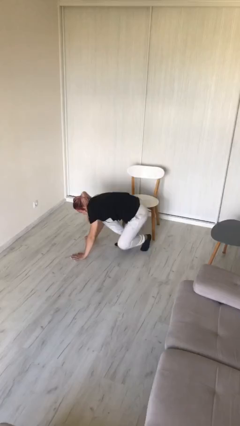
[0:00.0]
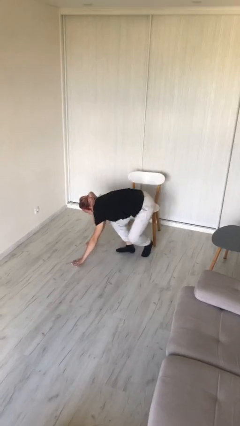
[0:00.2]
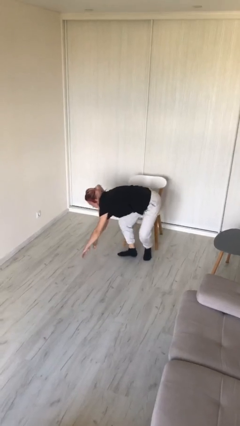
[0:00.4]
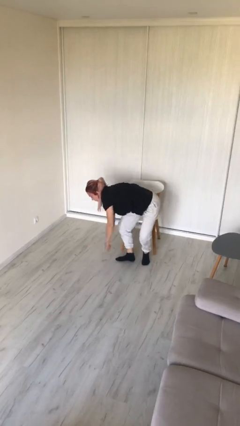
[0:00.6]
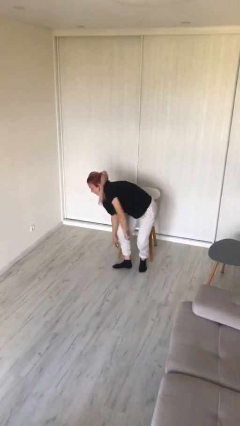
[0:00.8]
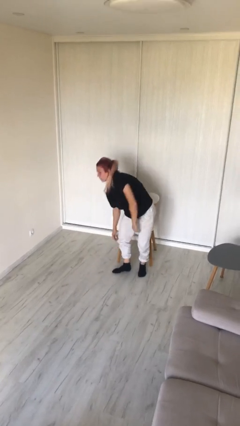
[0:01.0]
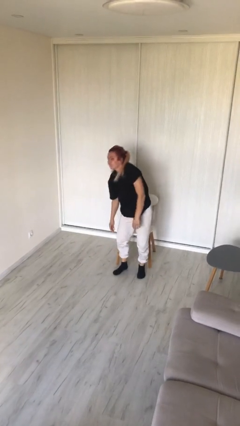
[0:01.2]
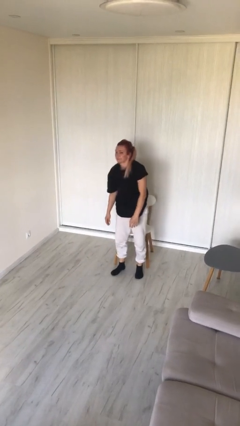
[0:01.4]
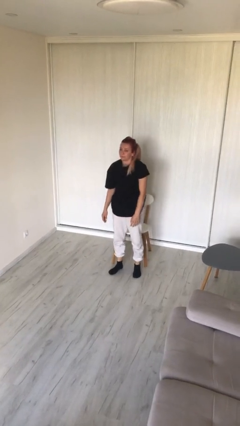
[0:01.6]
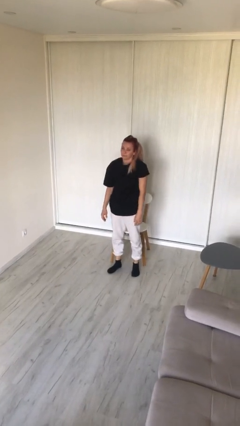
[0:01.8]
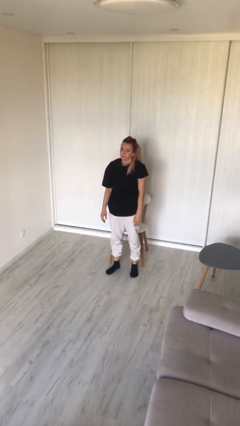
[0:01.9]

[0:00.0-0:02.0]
person stands up from floor

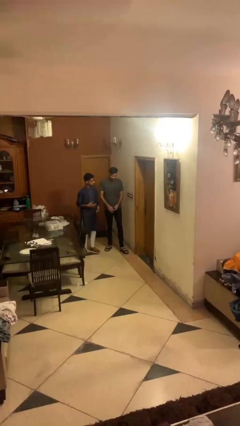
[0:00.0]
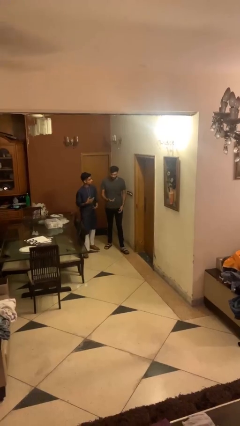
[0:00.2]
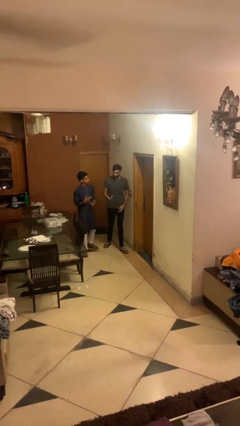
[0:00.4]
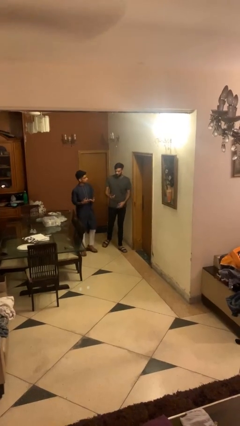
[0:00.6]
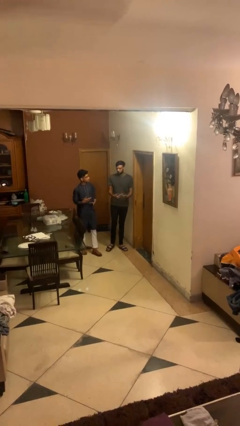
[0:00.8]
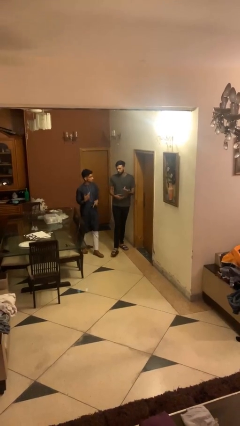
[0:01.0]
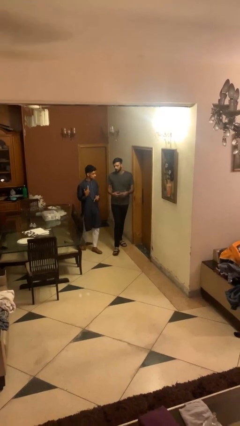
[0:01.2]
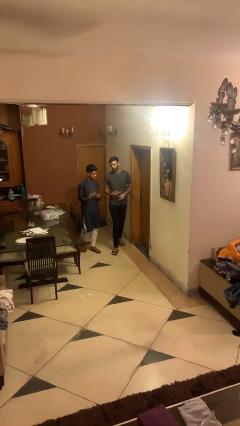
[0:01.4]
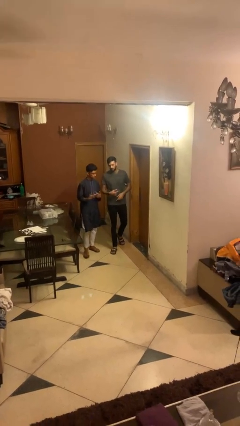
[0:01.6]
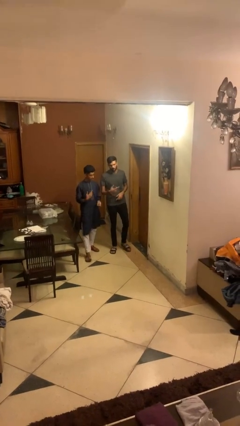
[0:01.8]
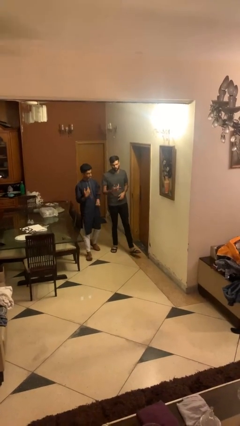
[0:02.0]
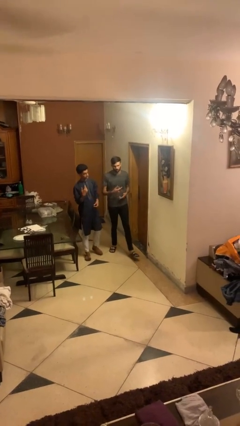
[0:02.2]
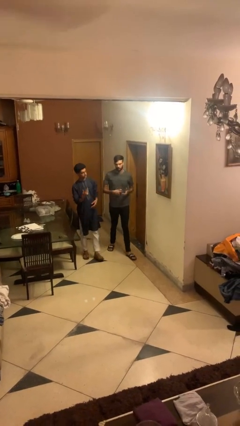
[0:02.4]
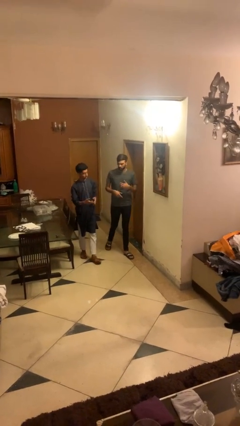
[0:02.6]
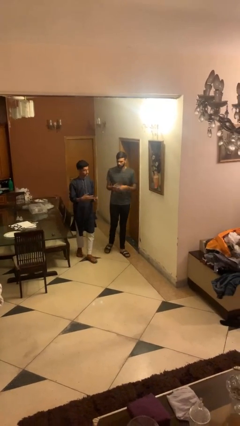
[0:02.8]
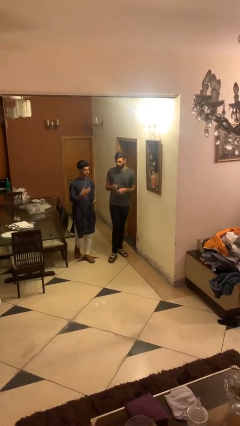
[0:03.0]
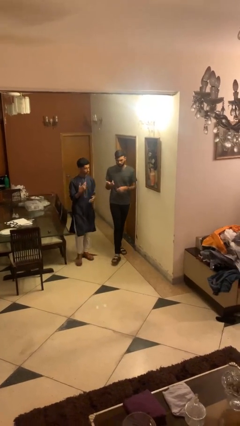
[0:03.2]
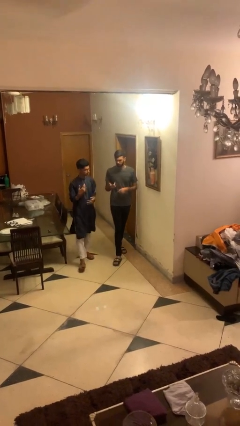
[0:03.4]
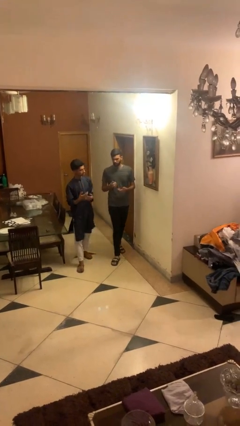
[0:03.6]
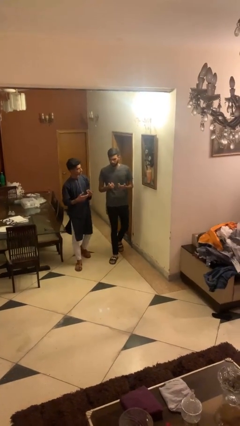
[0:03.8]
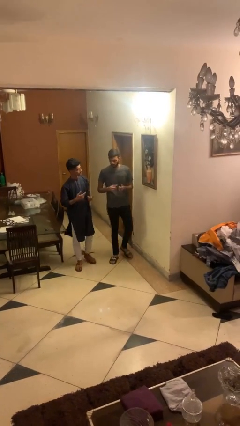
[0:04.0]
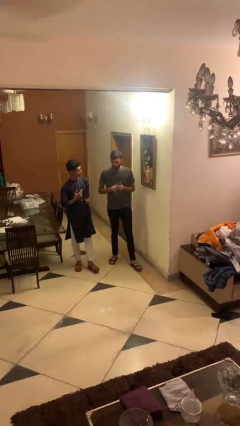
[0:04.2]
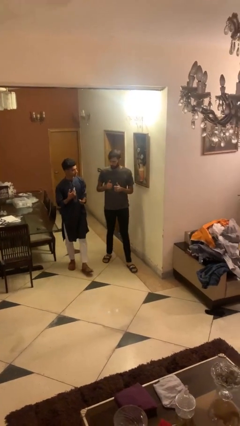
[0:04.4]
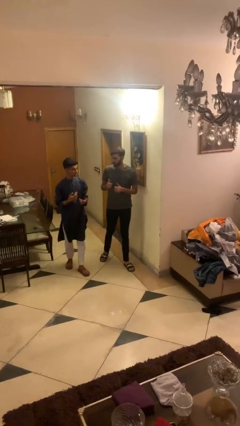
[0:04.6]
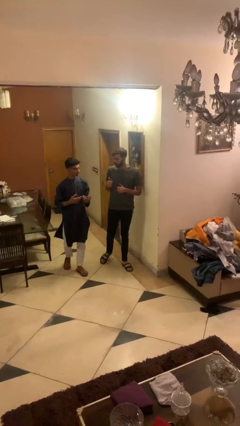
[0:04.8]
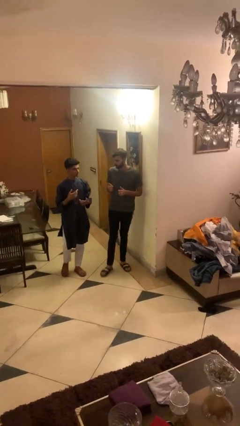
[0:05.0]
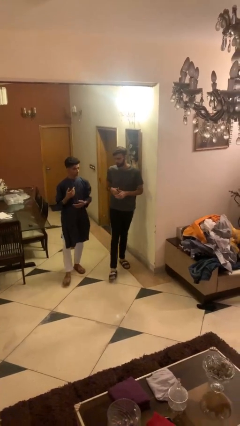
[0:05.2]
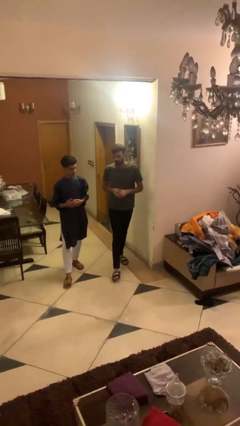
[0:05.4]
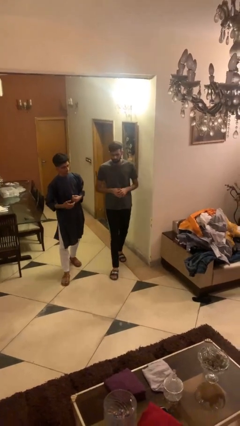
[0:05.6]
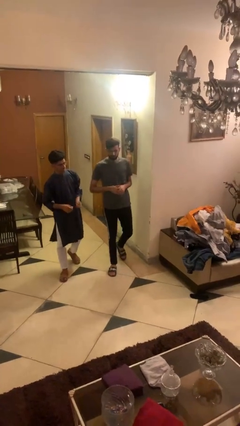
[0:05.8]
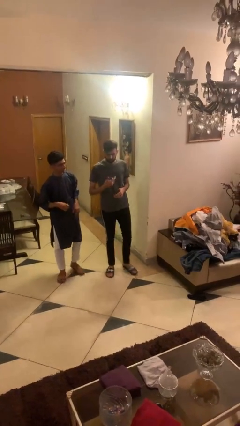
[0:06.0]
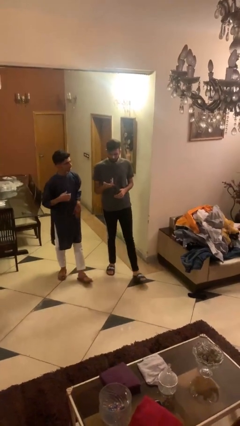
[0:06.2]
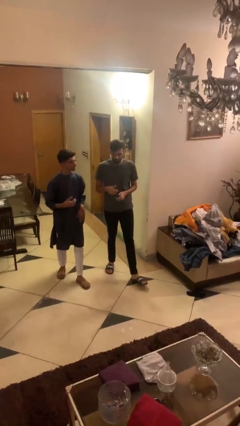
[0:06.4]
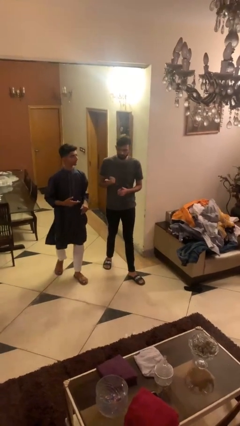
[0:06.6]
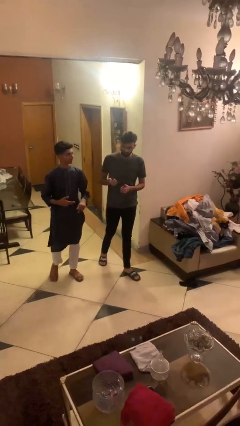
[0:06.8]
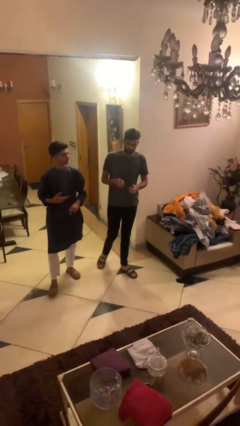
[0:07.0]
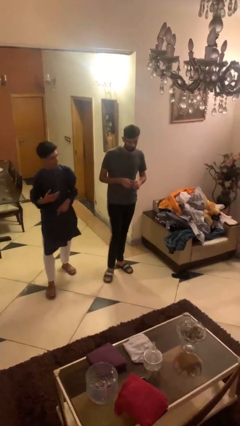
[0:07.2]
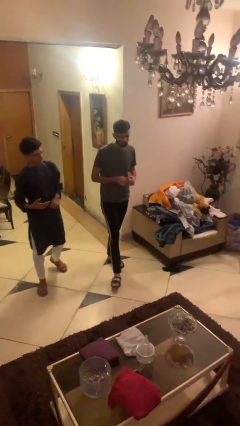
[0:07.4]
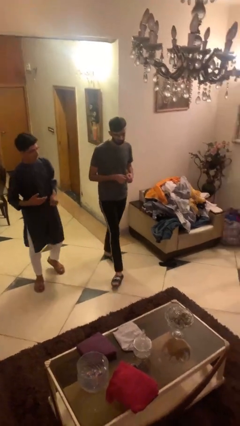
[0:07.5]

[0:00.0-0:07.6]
person talks to person

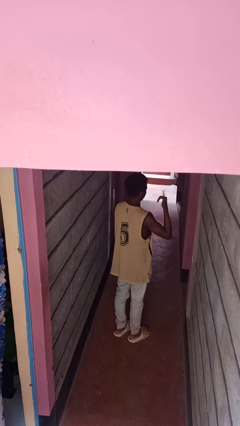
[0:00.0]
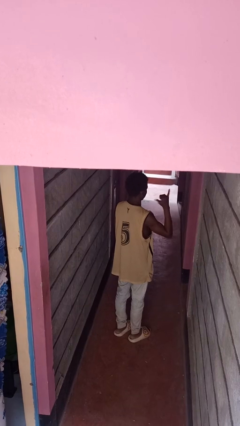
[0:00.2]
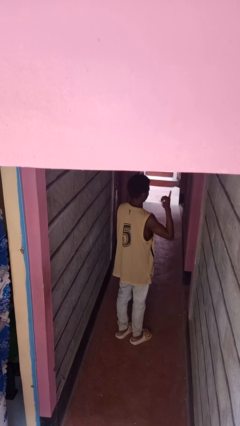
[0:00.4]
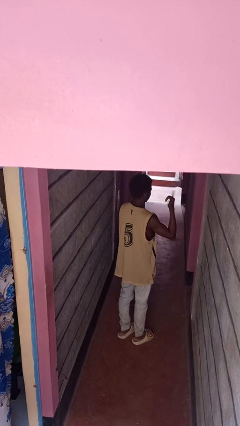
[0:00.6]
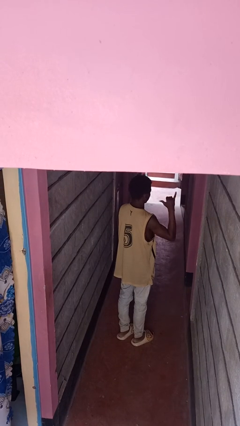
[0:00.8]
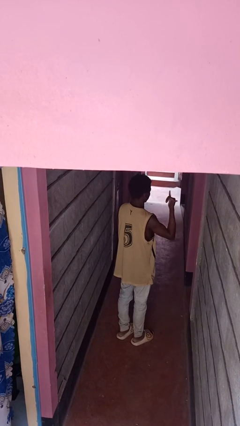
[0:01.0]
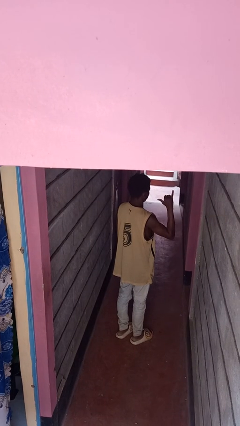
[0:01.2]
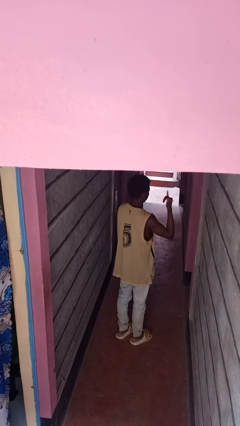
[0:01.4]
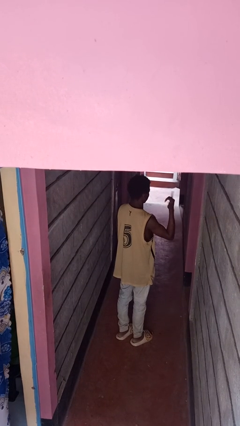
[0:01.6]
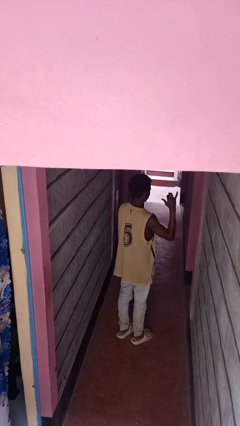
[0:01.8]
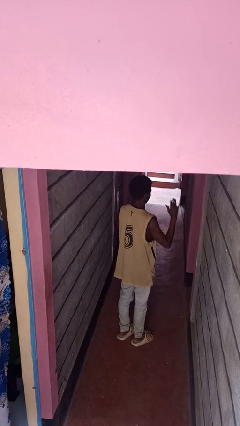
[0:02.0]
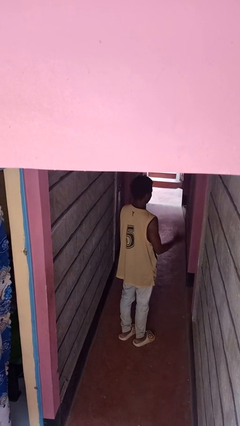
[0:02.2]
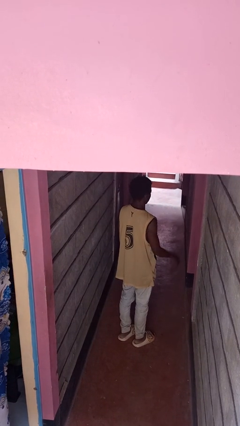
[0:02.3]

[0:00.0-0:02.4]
person gestures hang loose

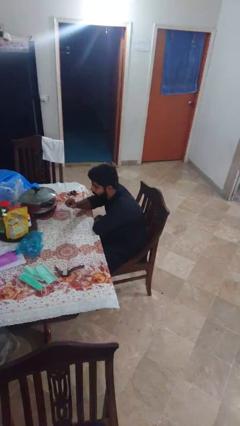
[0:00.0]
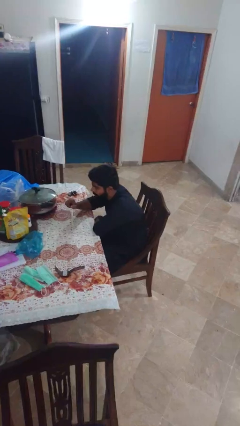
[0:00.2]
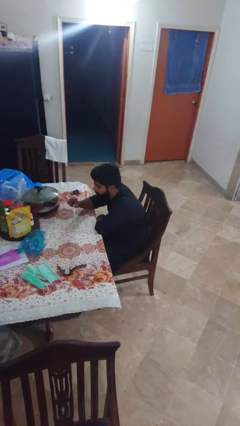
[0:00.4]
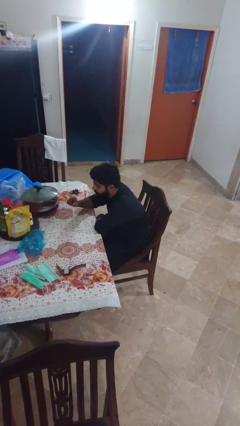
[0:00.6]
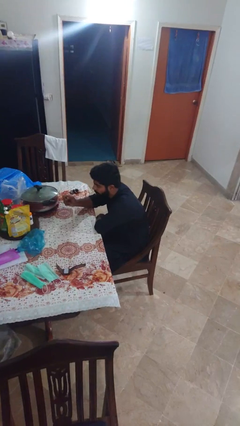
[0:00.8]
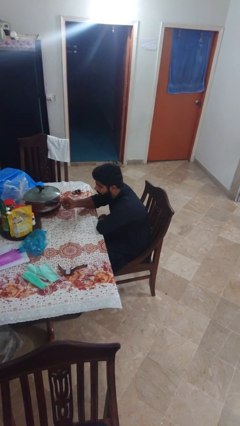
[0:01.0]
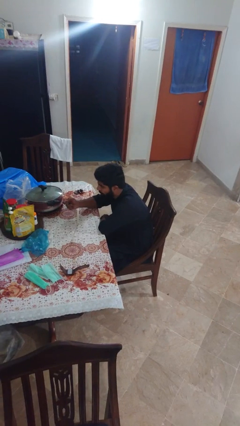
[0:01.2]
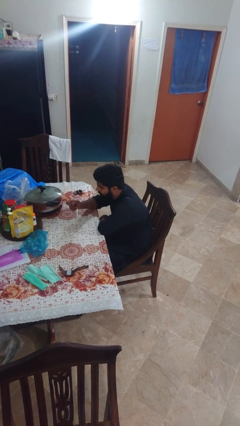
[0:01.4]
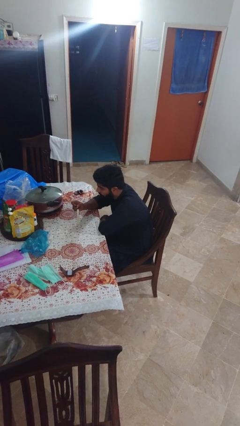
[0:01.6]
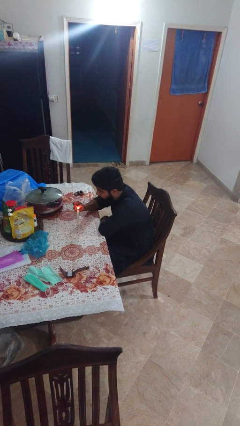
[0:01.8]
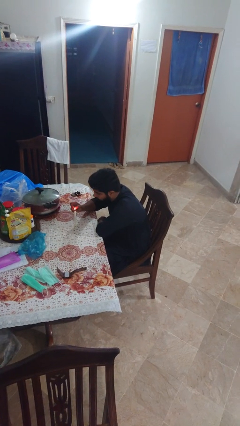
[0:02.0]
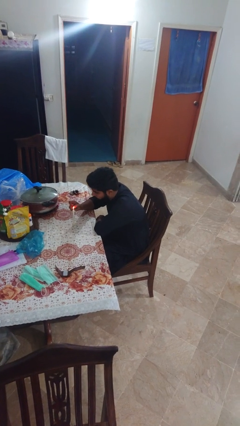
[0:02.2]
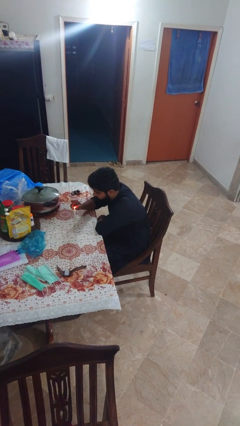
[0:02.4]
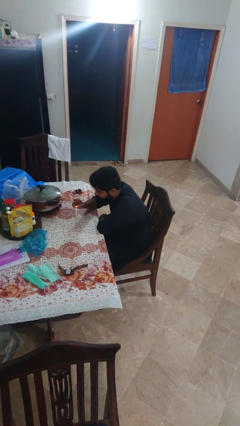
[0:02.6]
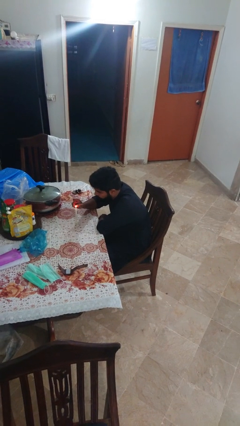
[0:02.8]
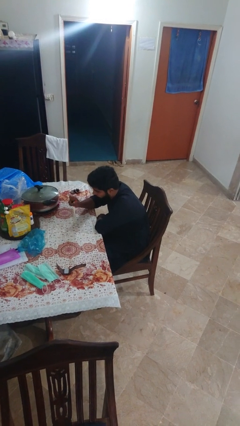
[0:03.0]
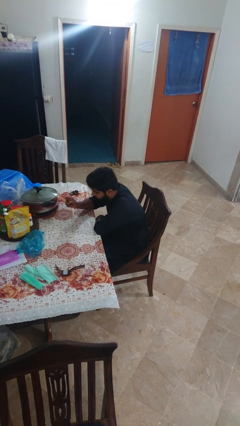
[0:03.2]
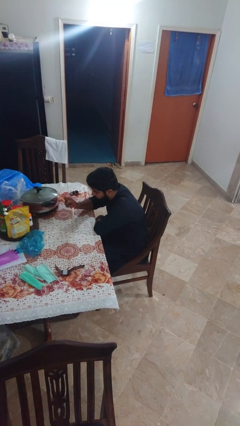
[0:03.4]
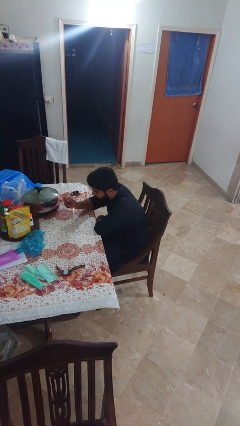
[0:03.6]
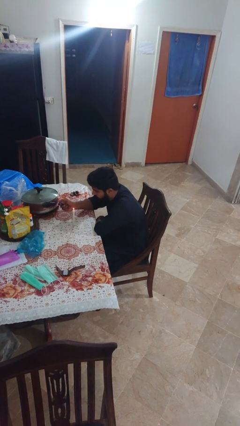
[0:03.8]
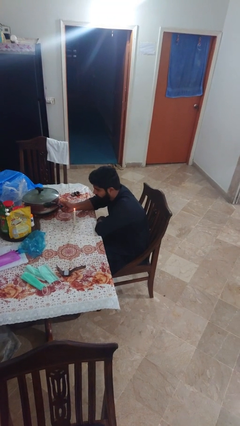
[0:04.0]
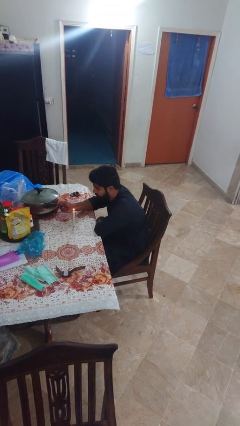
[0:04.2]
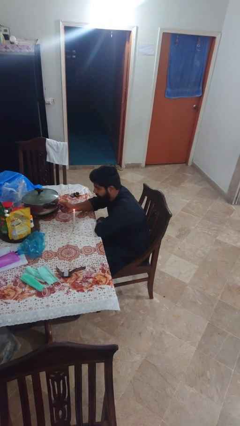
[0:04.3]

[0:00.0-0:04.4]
person lights candle

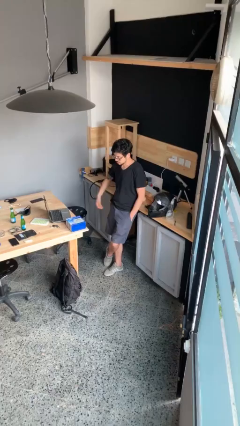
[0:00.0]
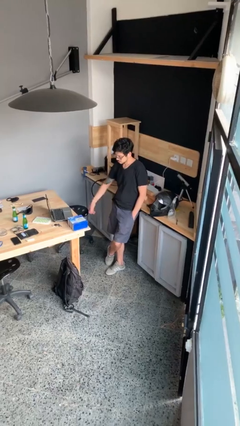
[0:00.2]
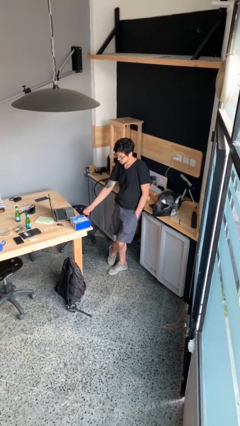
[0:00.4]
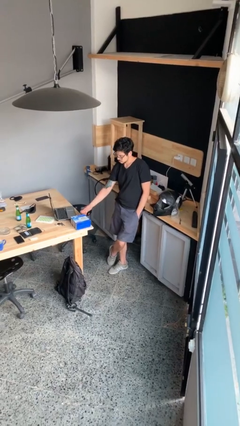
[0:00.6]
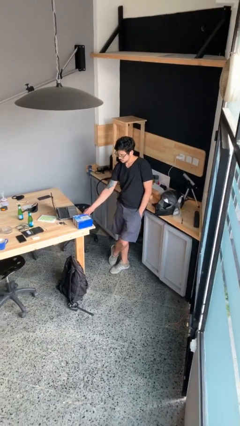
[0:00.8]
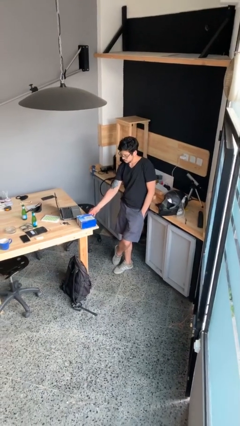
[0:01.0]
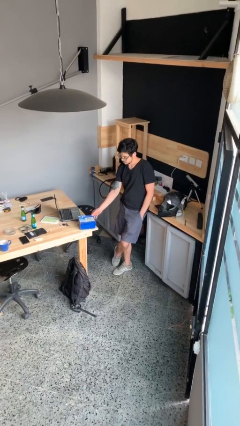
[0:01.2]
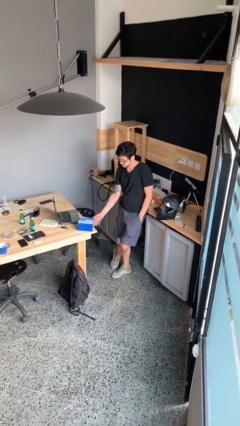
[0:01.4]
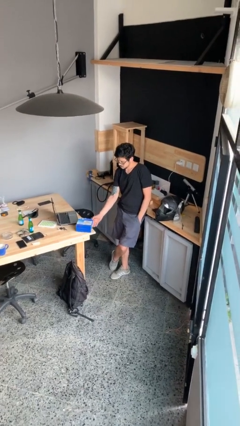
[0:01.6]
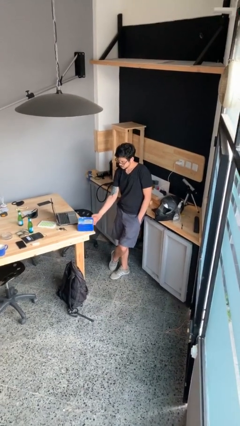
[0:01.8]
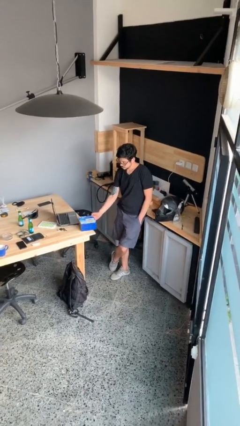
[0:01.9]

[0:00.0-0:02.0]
person picks up object from table
